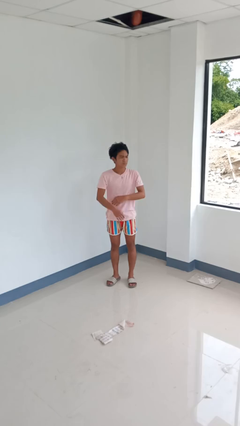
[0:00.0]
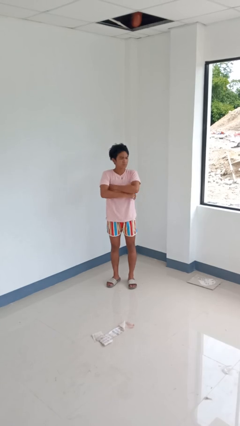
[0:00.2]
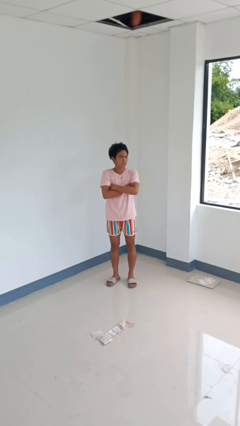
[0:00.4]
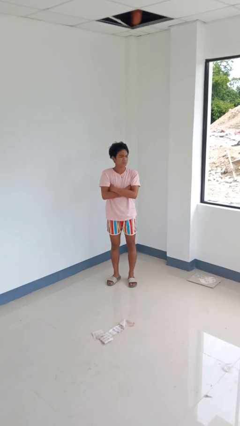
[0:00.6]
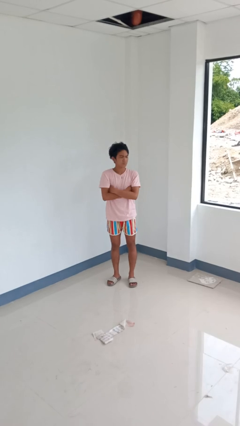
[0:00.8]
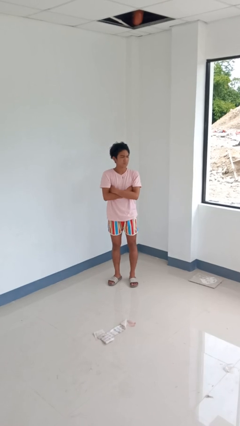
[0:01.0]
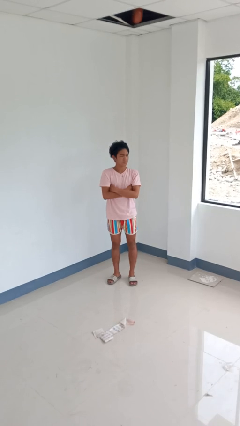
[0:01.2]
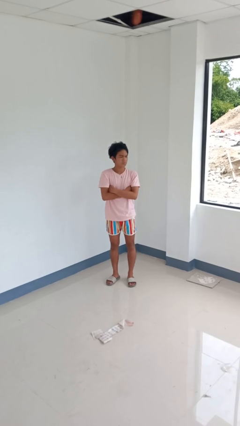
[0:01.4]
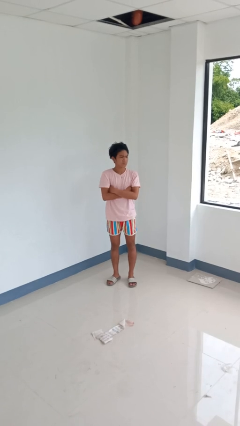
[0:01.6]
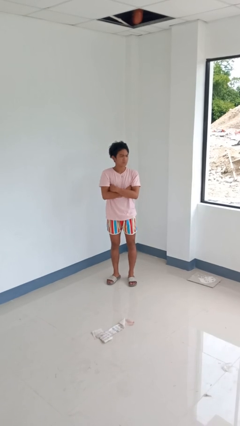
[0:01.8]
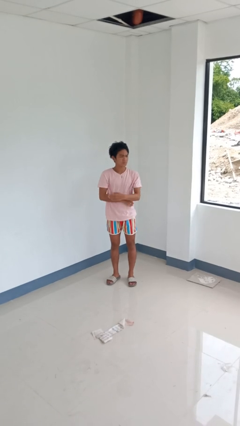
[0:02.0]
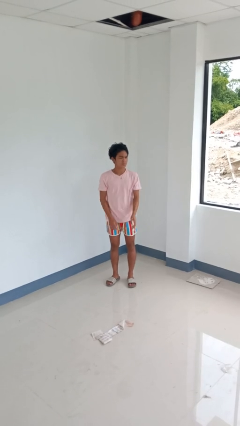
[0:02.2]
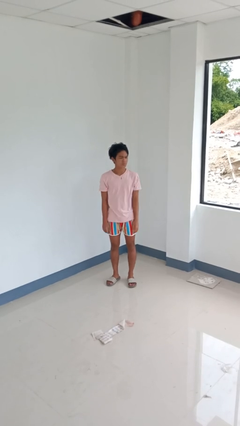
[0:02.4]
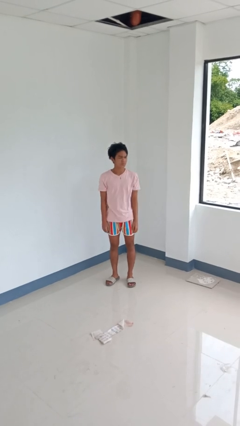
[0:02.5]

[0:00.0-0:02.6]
person crosses arms

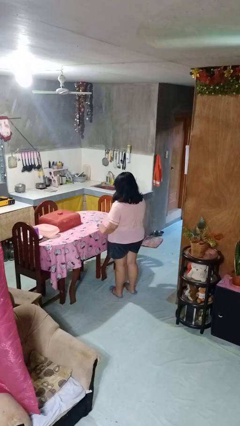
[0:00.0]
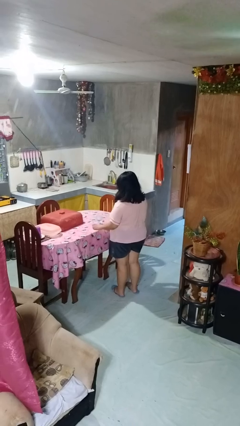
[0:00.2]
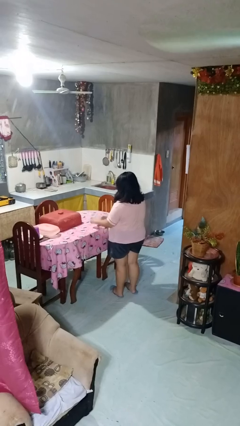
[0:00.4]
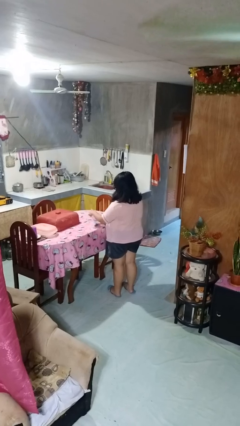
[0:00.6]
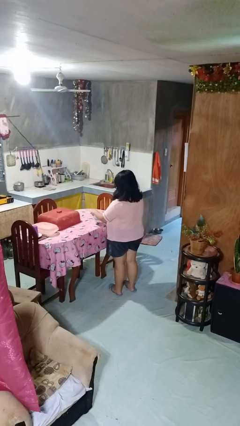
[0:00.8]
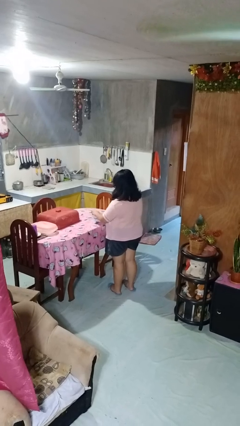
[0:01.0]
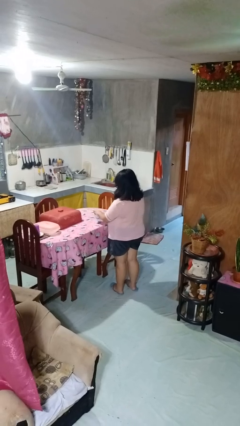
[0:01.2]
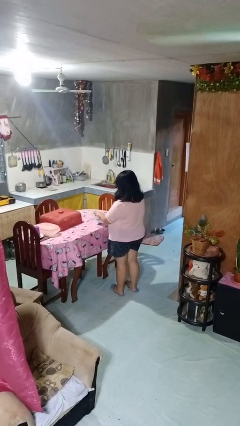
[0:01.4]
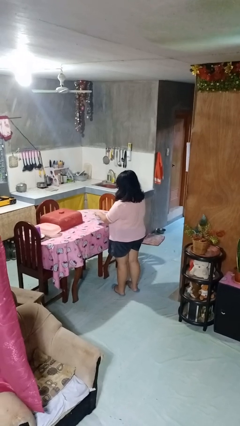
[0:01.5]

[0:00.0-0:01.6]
person closes jar

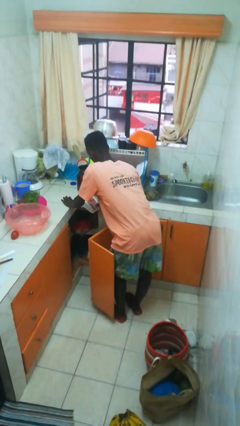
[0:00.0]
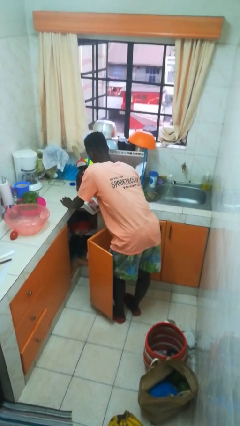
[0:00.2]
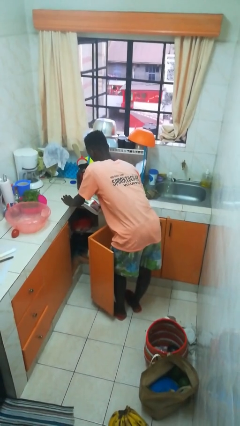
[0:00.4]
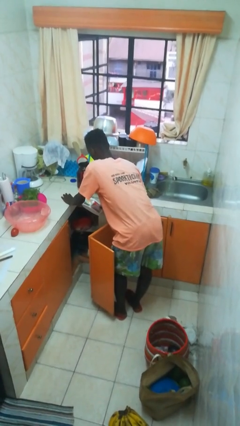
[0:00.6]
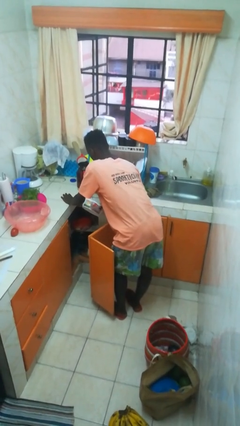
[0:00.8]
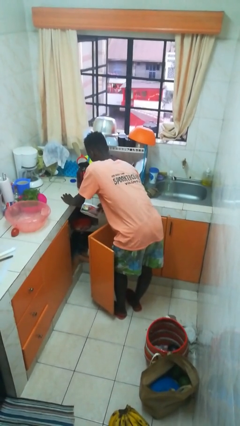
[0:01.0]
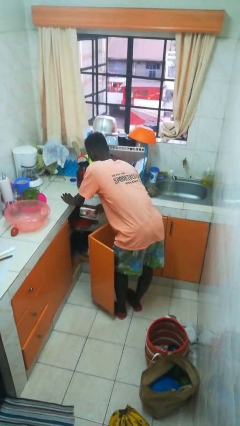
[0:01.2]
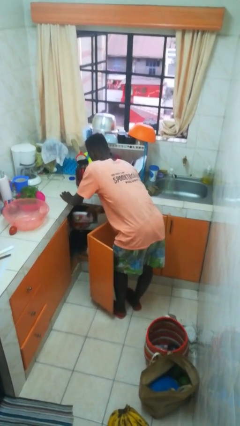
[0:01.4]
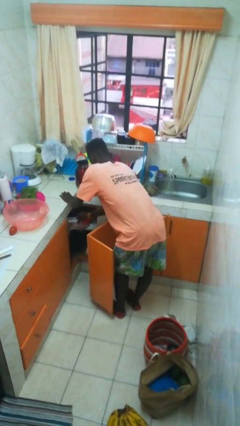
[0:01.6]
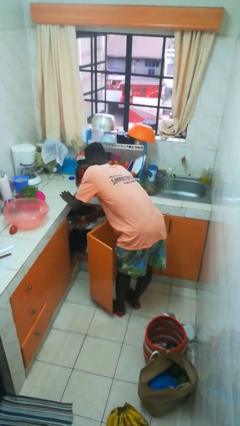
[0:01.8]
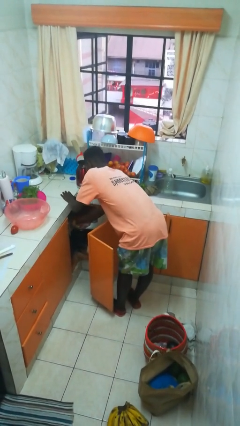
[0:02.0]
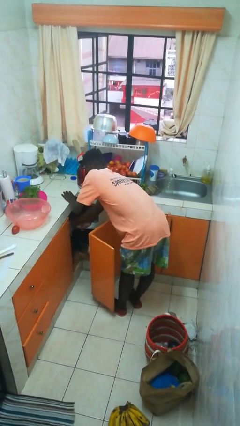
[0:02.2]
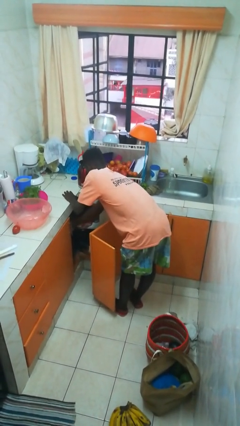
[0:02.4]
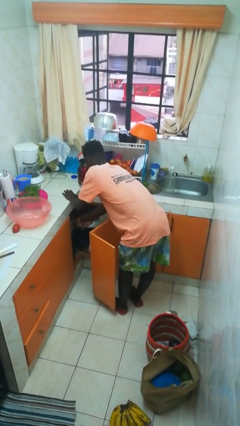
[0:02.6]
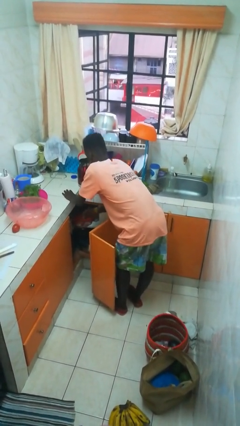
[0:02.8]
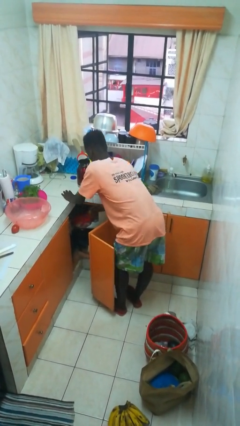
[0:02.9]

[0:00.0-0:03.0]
person puts object in cabinet

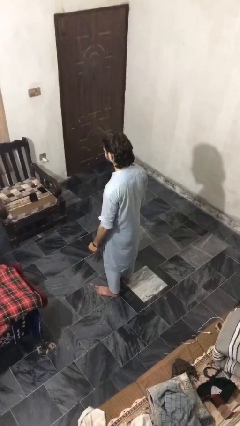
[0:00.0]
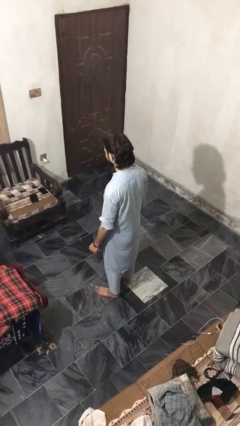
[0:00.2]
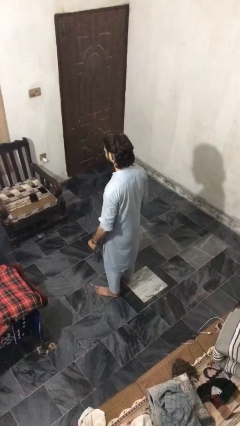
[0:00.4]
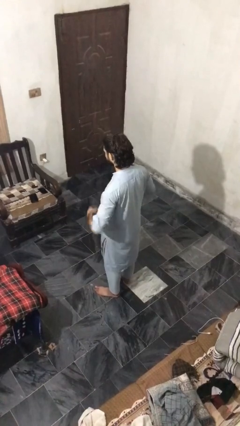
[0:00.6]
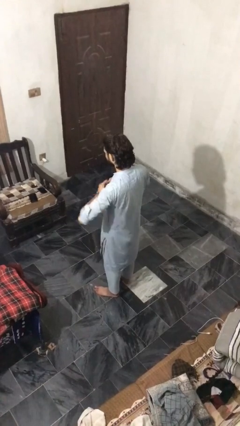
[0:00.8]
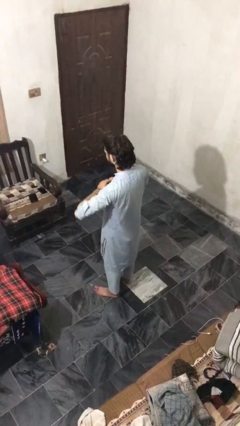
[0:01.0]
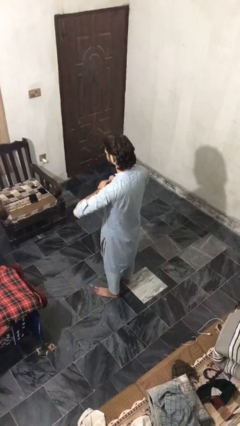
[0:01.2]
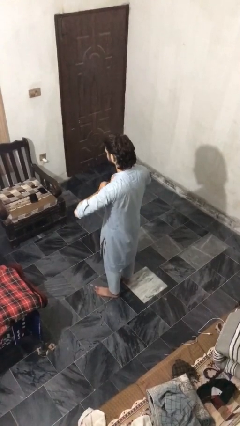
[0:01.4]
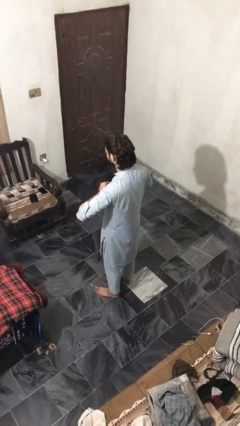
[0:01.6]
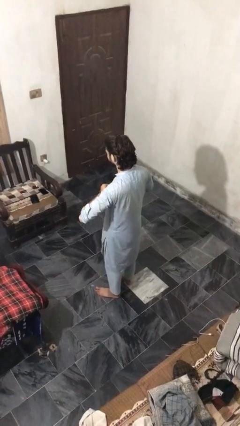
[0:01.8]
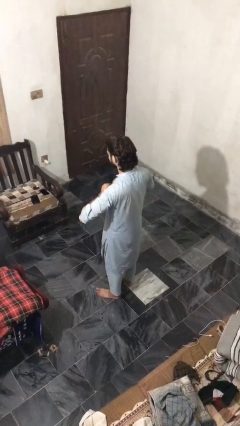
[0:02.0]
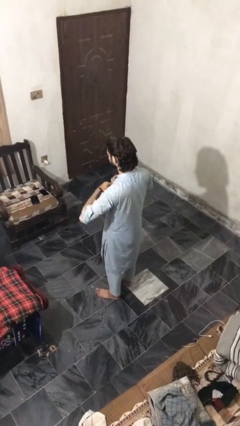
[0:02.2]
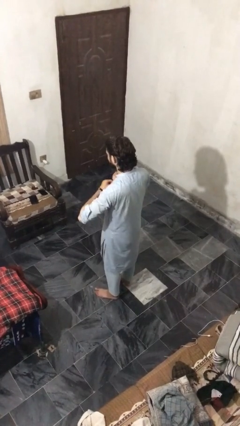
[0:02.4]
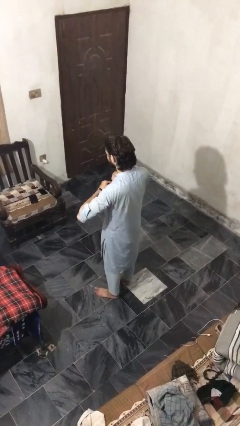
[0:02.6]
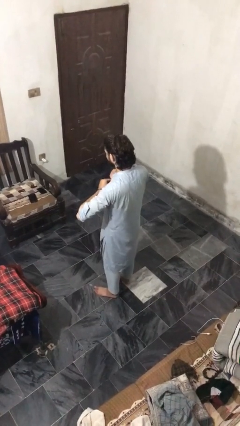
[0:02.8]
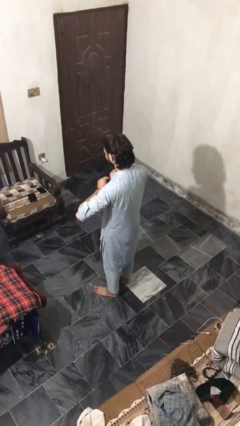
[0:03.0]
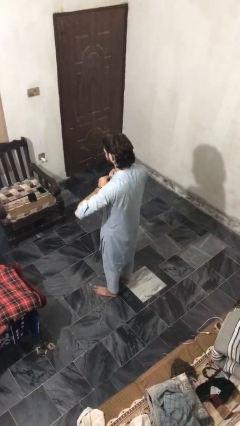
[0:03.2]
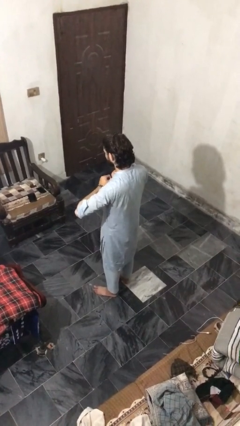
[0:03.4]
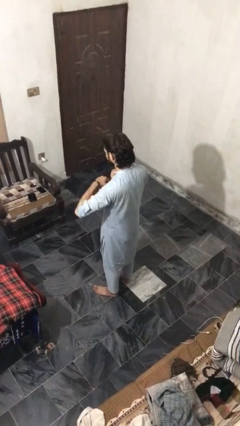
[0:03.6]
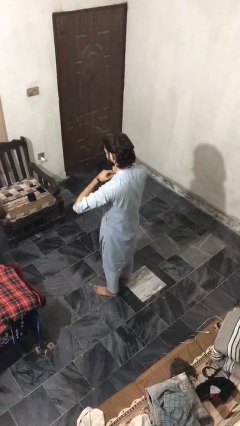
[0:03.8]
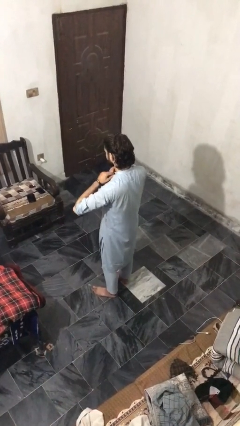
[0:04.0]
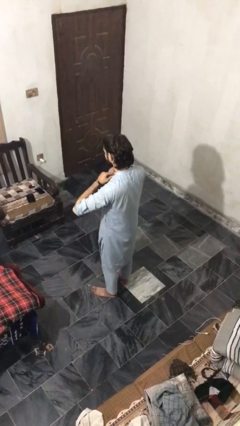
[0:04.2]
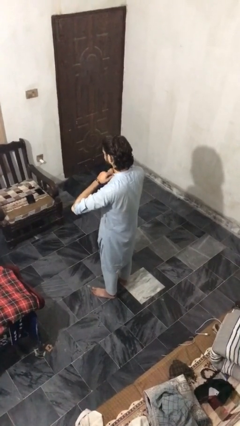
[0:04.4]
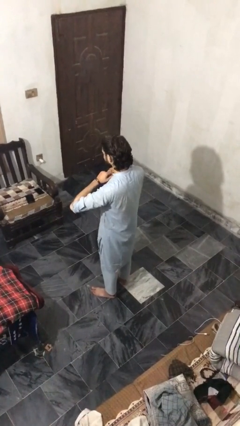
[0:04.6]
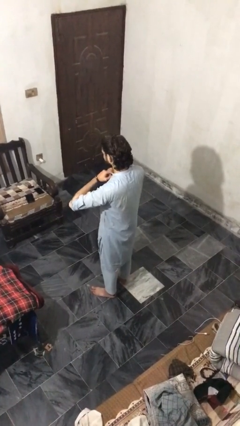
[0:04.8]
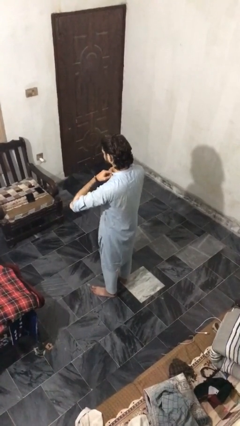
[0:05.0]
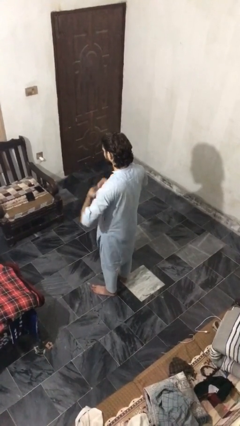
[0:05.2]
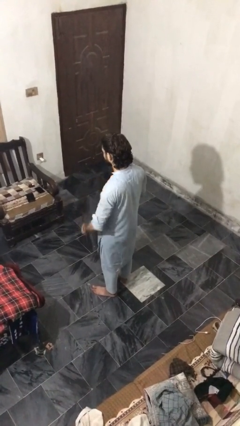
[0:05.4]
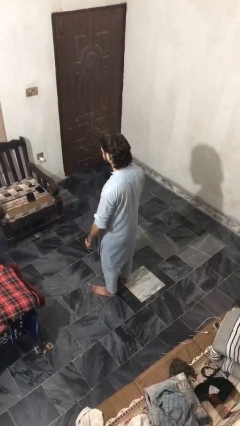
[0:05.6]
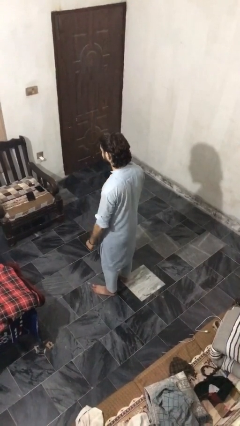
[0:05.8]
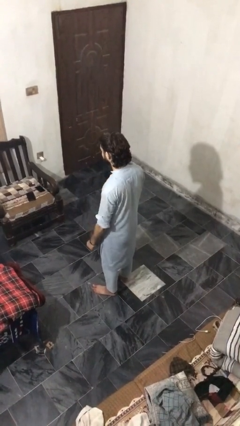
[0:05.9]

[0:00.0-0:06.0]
person buttons shirt

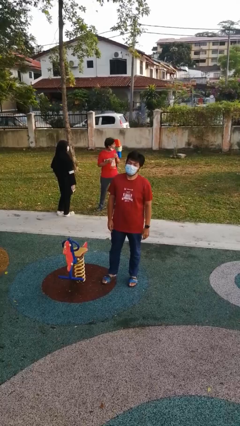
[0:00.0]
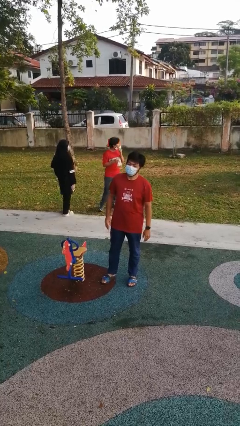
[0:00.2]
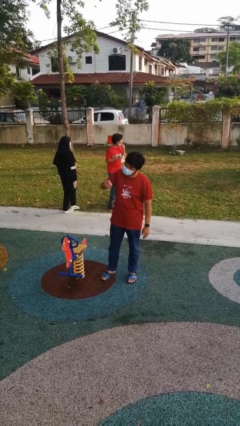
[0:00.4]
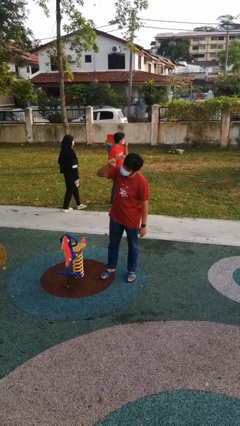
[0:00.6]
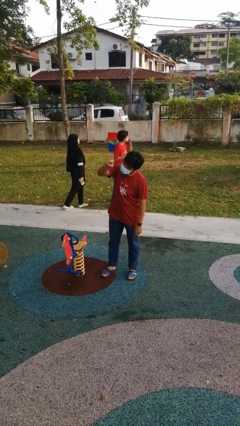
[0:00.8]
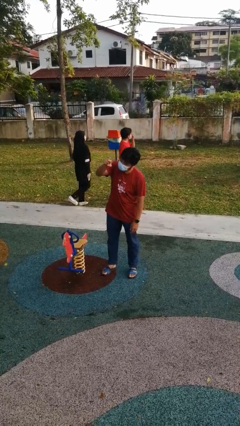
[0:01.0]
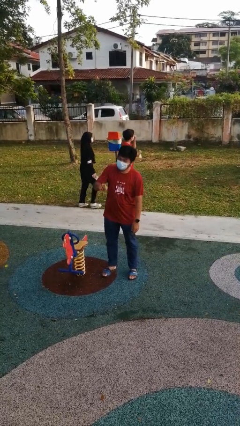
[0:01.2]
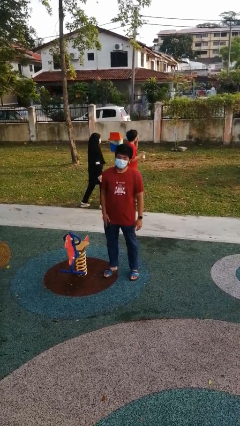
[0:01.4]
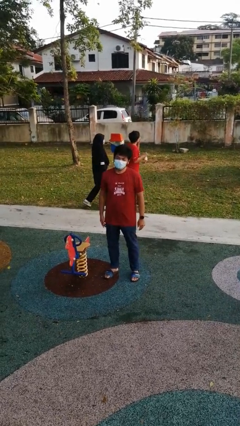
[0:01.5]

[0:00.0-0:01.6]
person points at person

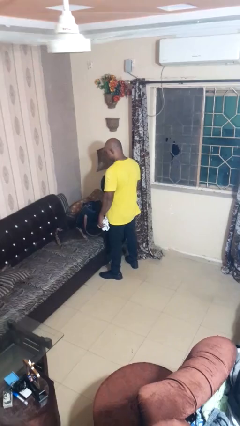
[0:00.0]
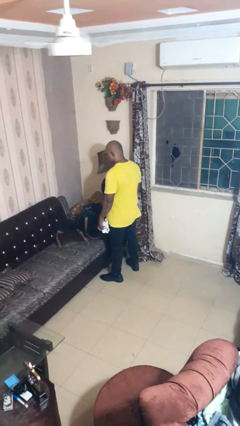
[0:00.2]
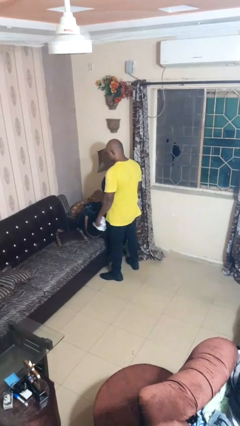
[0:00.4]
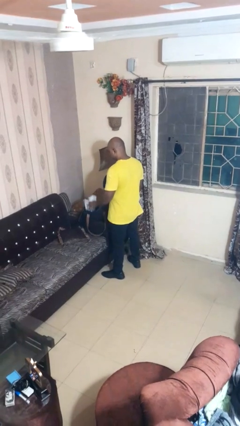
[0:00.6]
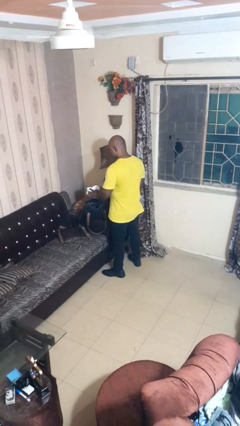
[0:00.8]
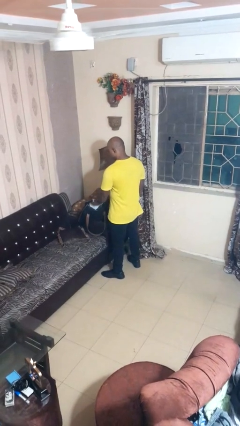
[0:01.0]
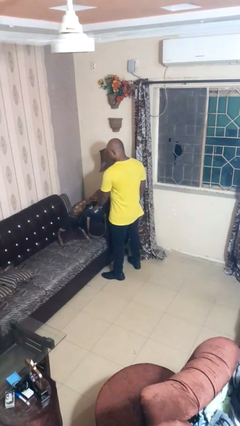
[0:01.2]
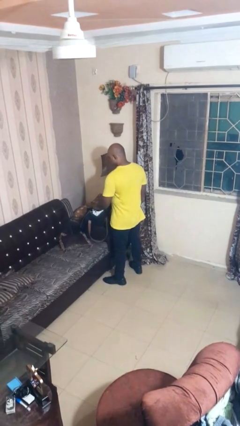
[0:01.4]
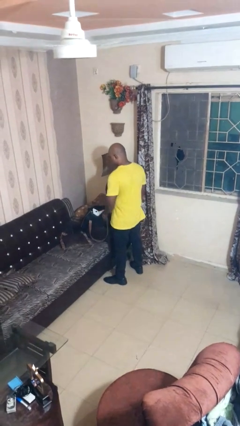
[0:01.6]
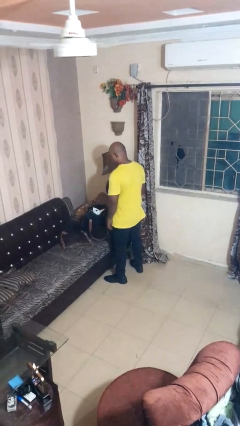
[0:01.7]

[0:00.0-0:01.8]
person puts object into bag

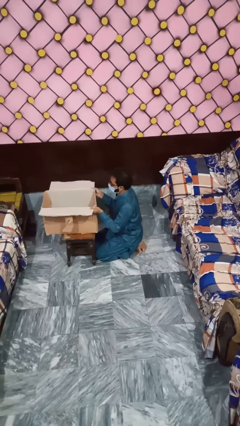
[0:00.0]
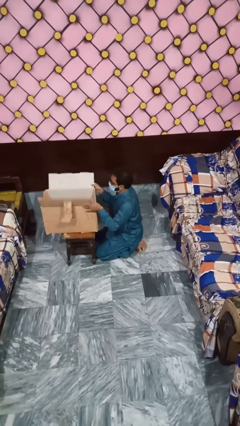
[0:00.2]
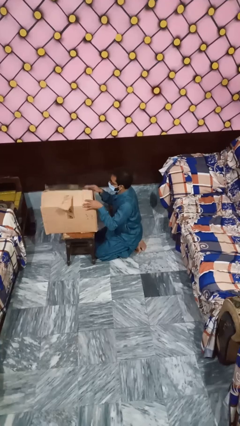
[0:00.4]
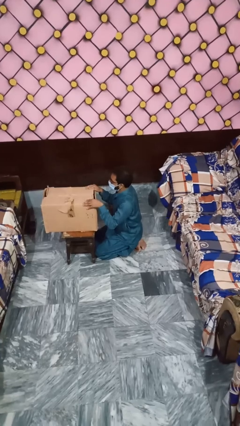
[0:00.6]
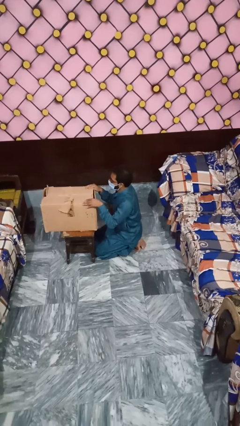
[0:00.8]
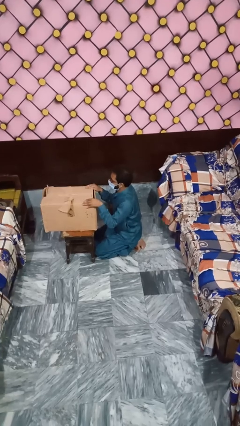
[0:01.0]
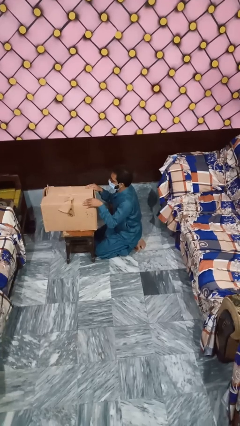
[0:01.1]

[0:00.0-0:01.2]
person closes box
